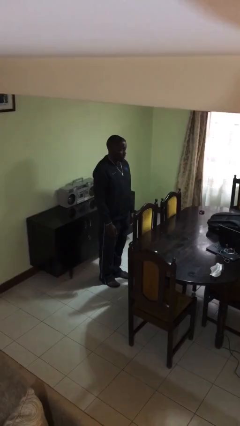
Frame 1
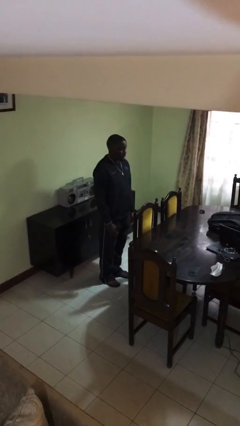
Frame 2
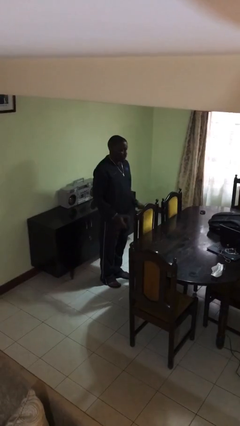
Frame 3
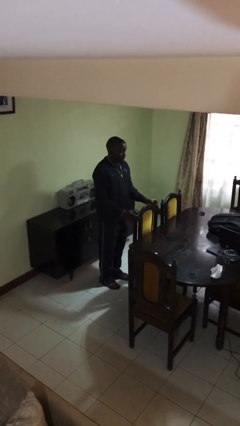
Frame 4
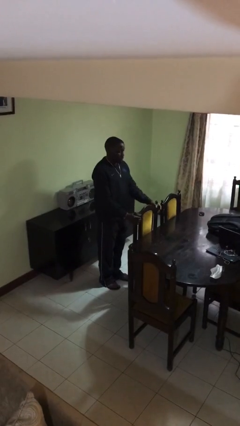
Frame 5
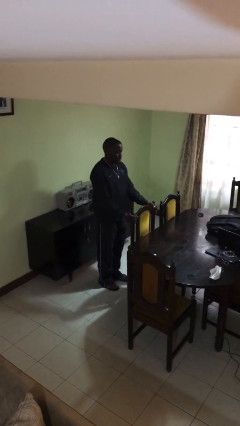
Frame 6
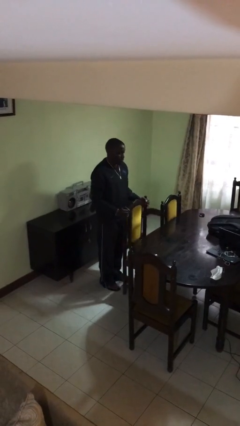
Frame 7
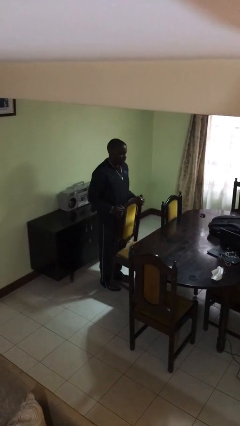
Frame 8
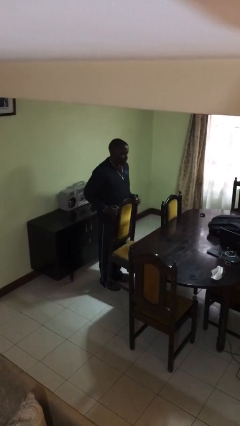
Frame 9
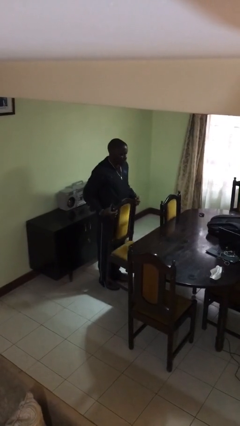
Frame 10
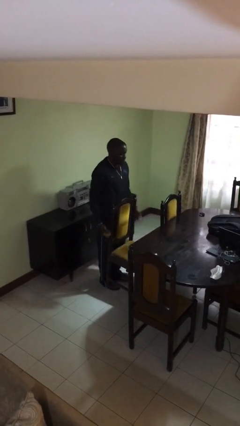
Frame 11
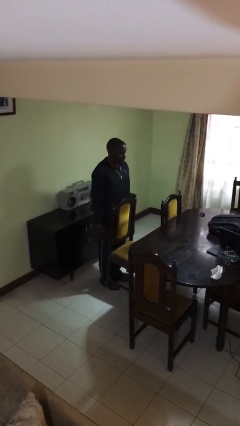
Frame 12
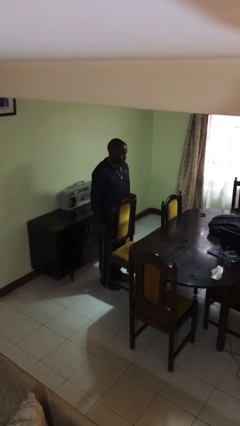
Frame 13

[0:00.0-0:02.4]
person pulls out chair

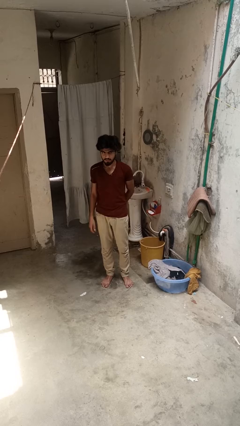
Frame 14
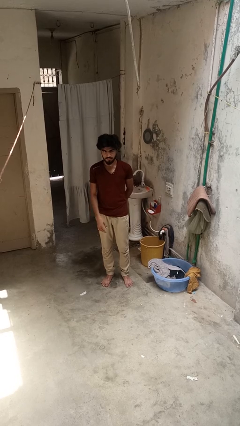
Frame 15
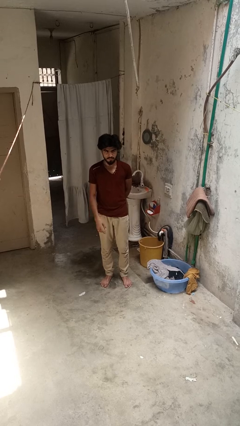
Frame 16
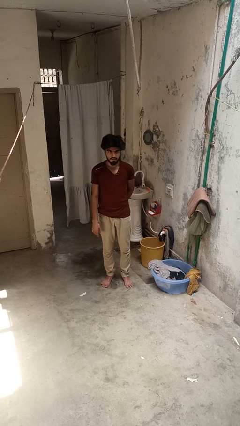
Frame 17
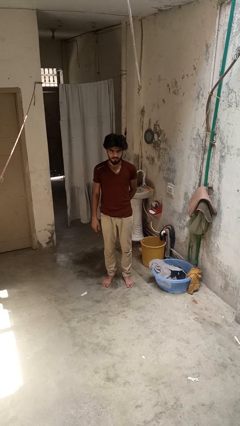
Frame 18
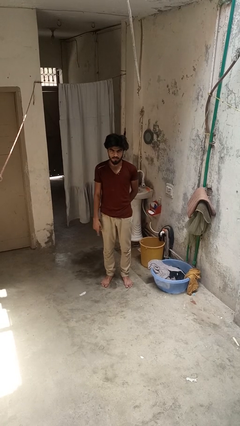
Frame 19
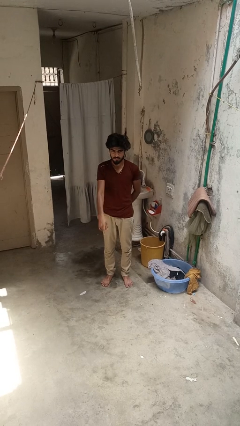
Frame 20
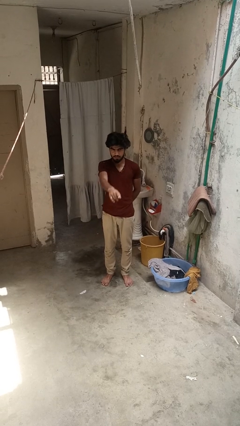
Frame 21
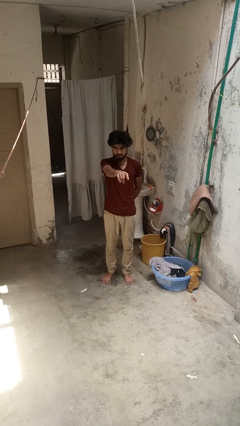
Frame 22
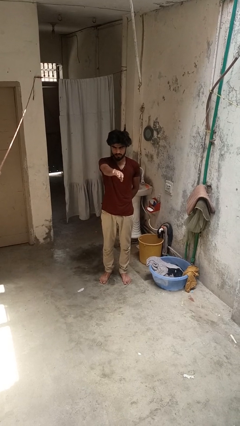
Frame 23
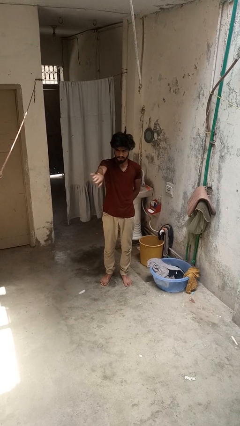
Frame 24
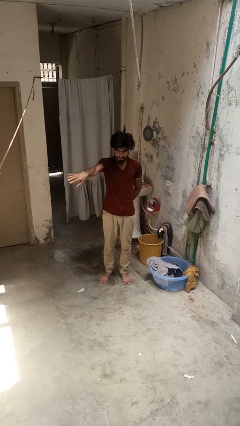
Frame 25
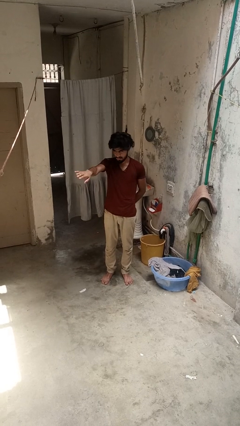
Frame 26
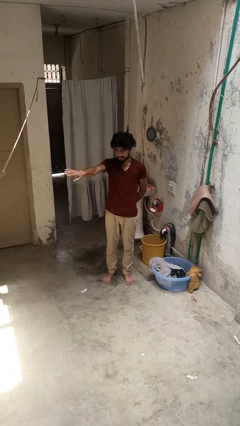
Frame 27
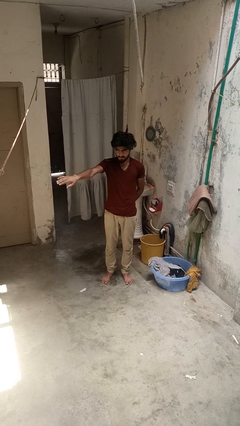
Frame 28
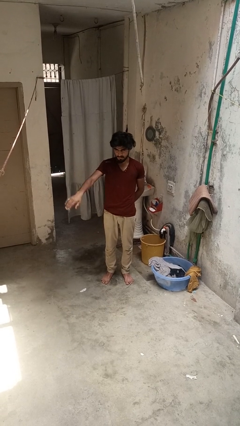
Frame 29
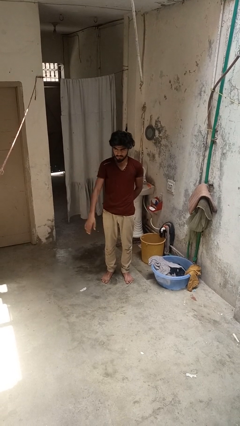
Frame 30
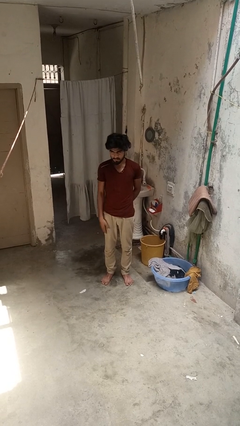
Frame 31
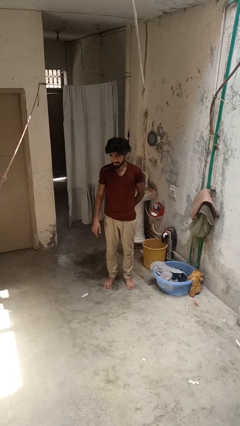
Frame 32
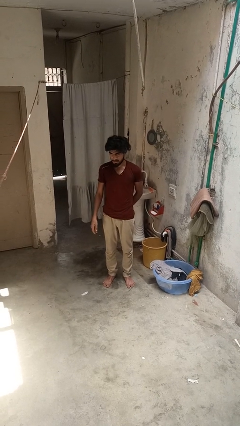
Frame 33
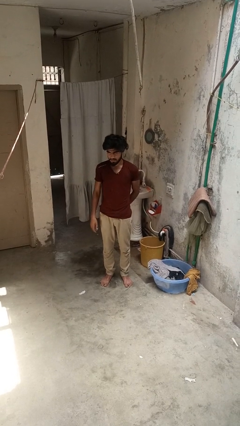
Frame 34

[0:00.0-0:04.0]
person gestures swipe right

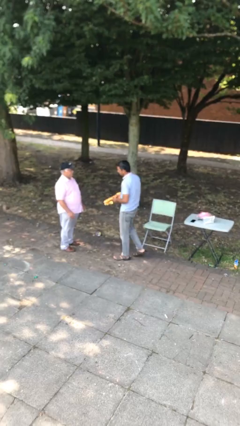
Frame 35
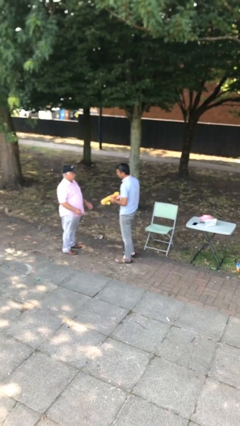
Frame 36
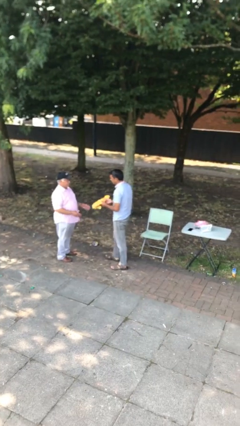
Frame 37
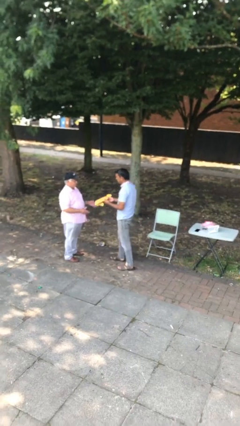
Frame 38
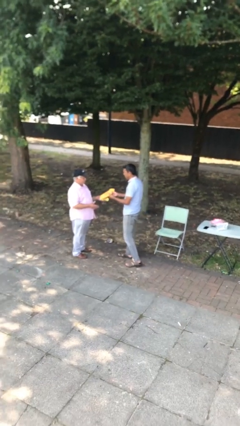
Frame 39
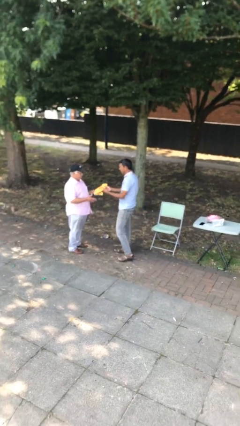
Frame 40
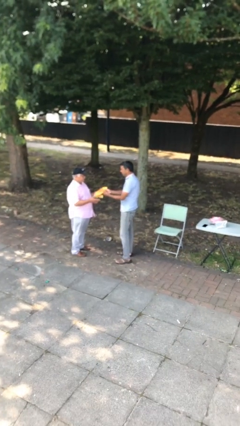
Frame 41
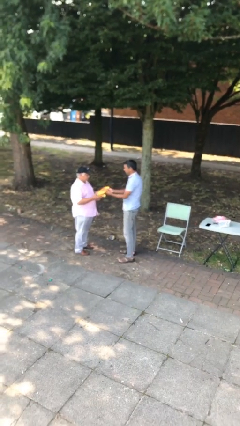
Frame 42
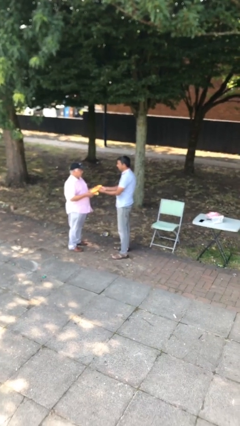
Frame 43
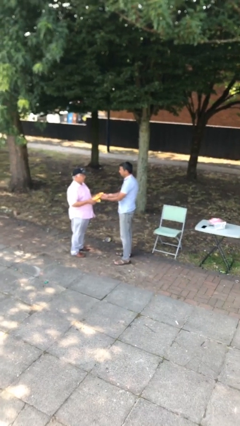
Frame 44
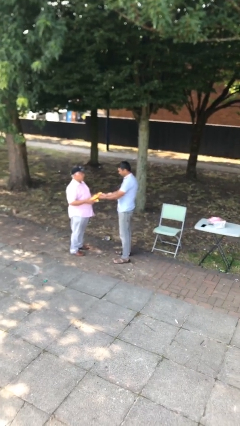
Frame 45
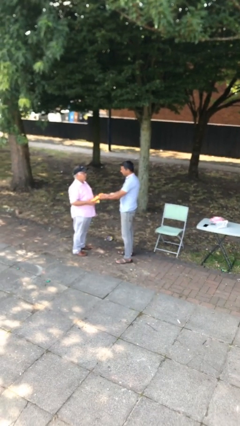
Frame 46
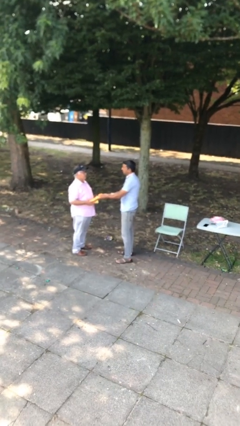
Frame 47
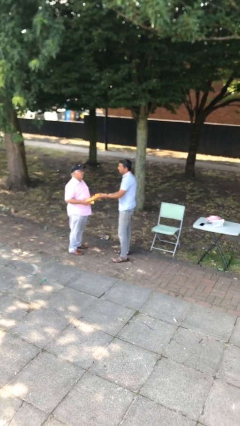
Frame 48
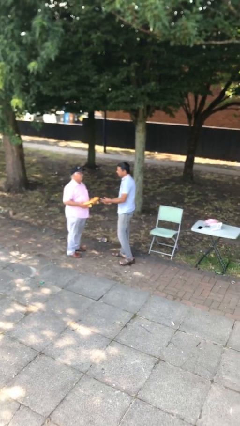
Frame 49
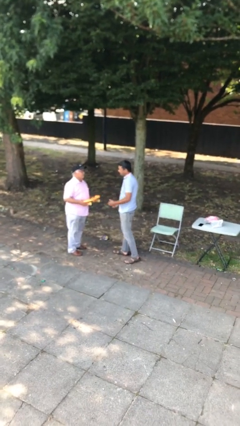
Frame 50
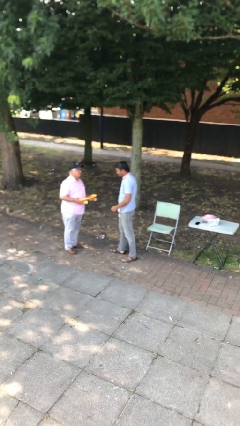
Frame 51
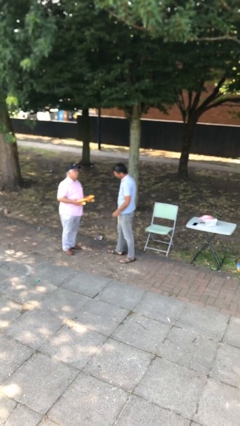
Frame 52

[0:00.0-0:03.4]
person transfers object to person

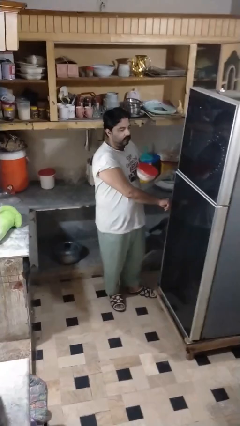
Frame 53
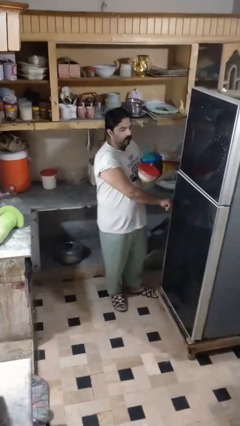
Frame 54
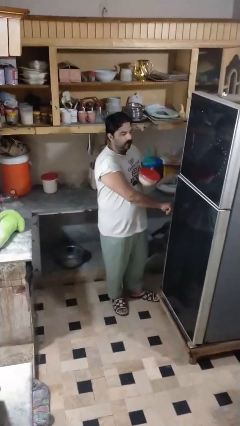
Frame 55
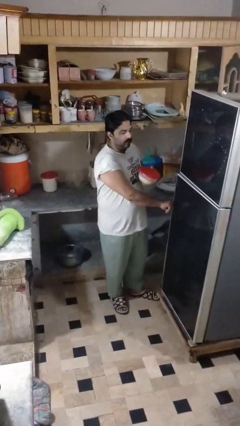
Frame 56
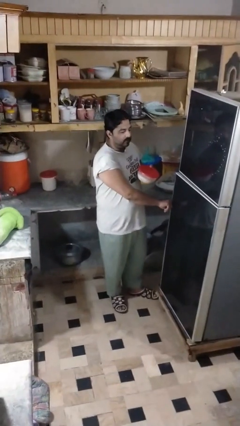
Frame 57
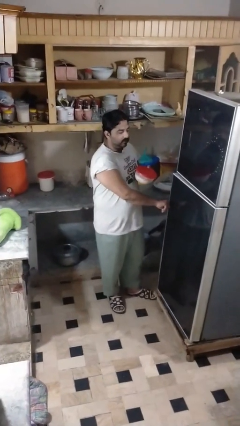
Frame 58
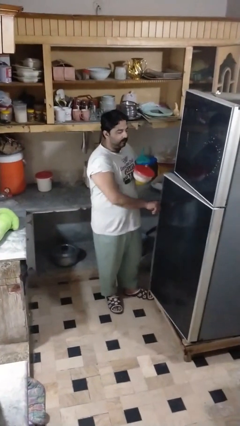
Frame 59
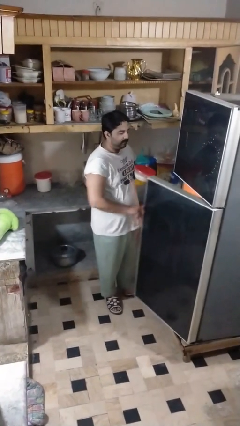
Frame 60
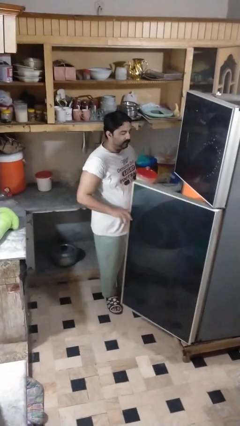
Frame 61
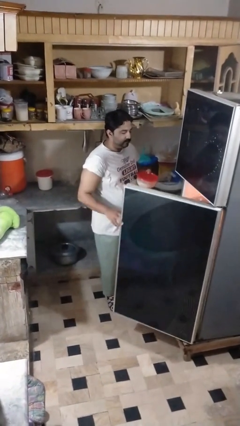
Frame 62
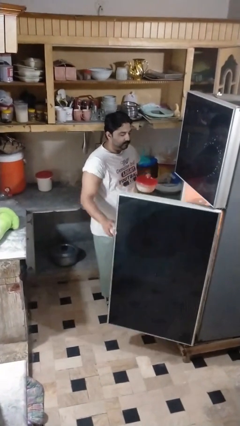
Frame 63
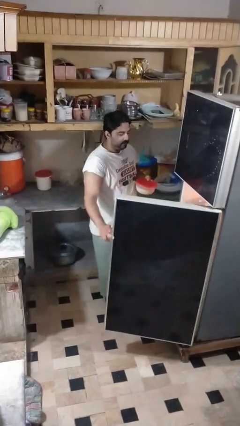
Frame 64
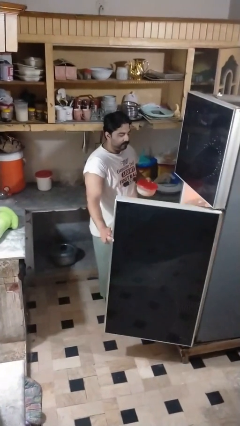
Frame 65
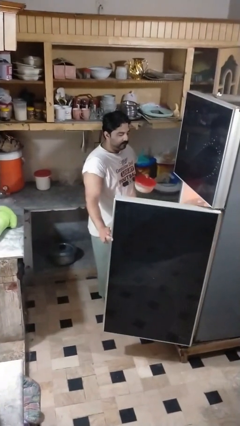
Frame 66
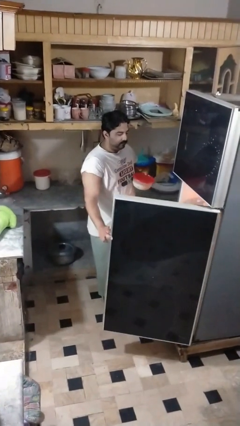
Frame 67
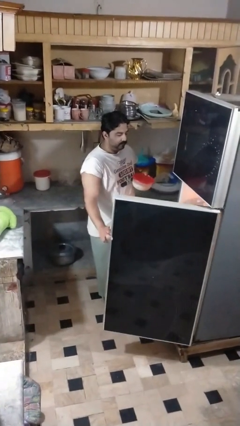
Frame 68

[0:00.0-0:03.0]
person opens refrigerator

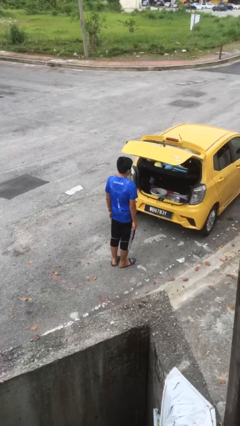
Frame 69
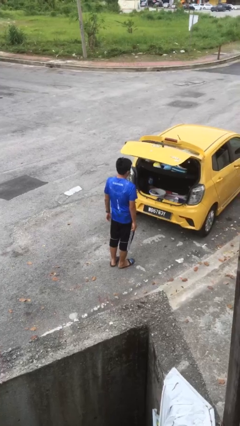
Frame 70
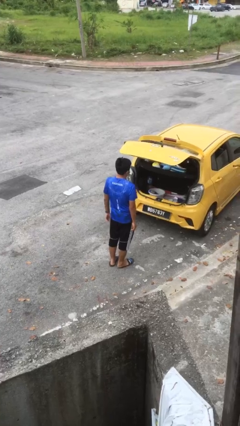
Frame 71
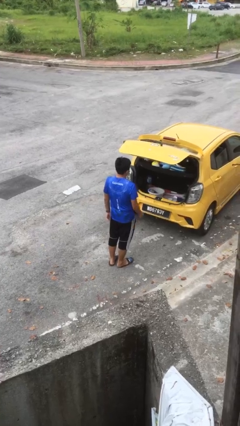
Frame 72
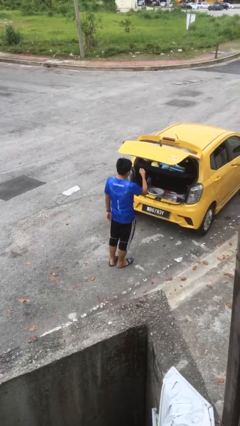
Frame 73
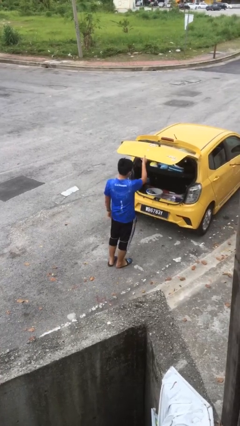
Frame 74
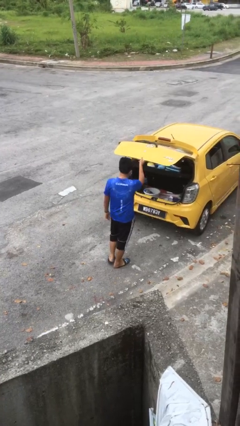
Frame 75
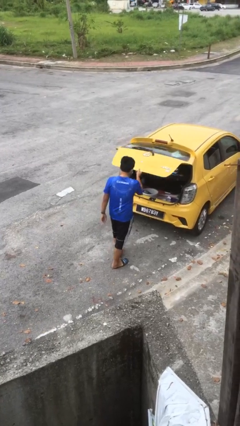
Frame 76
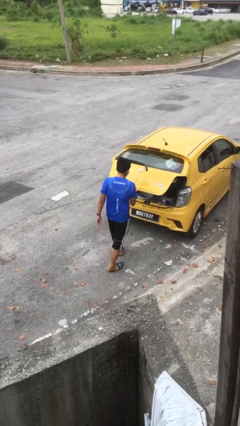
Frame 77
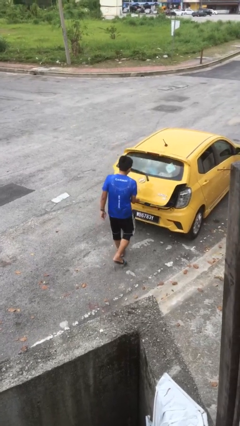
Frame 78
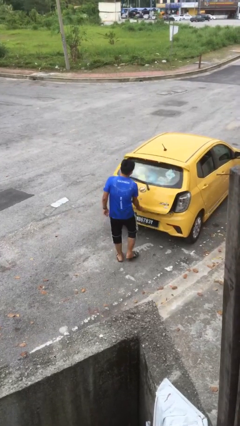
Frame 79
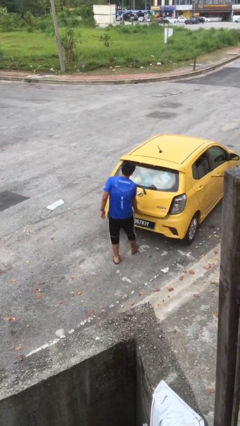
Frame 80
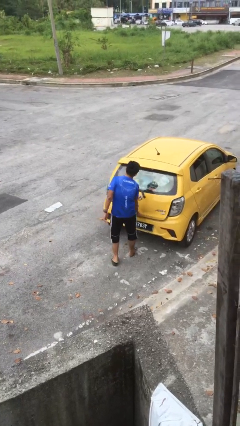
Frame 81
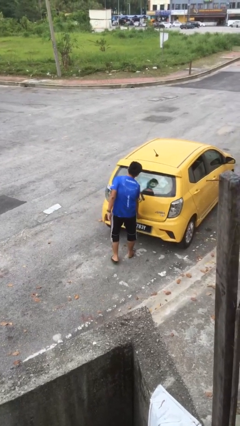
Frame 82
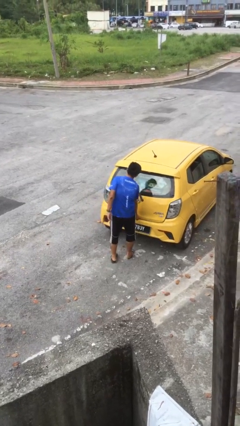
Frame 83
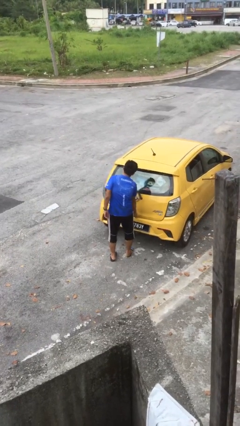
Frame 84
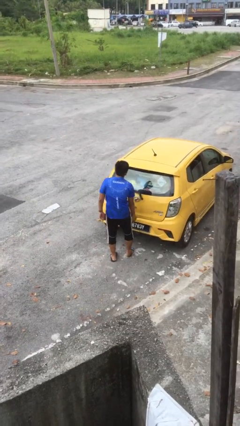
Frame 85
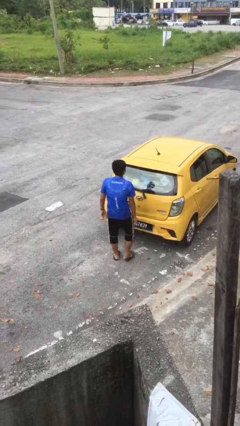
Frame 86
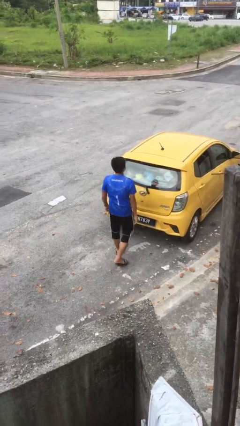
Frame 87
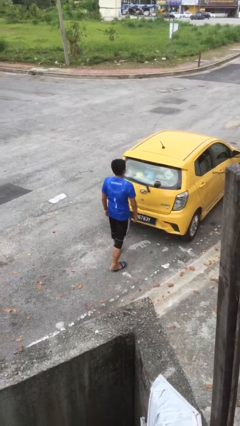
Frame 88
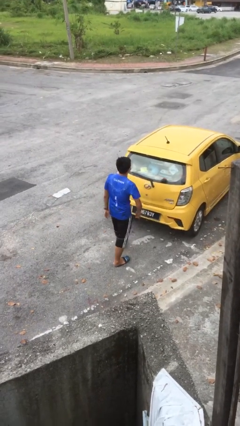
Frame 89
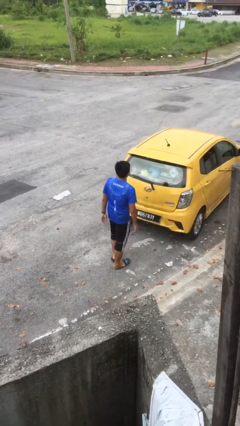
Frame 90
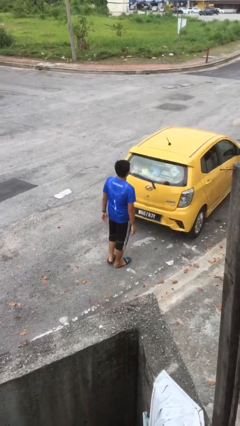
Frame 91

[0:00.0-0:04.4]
person closes car trunk

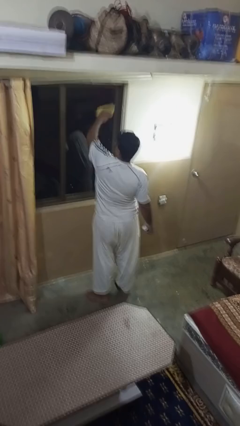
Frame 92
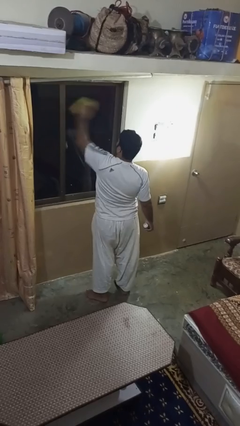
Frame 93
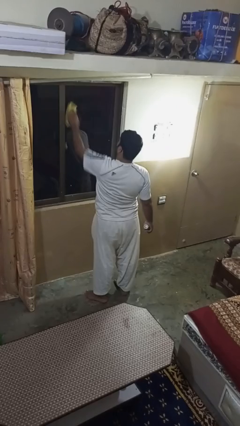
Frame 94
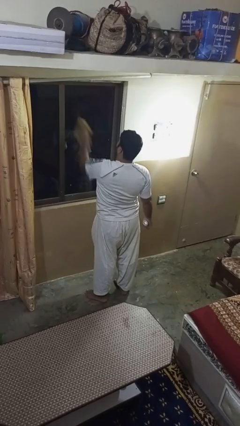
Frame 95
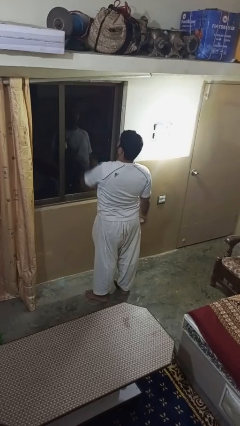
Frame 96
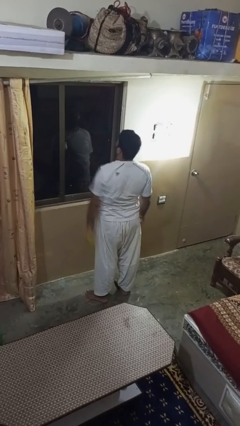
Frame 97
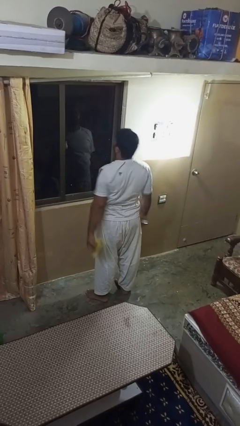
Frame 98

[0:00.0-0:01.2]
person washes window
